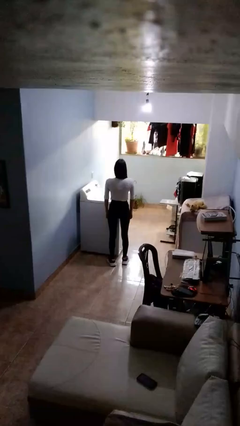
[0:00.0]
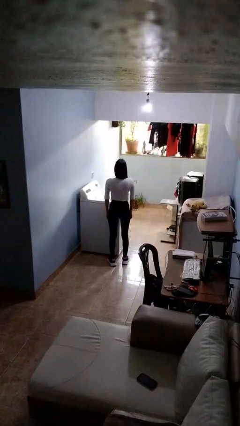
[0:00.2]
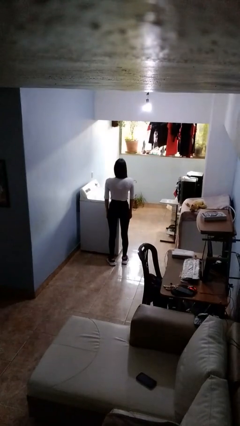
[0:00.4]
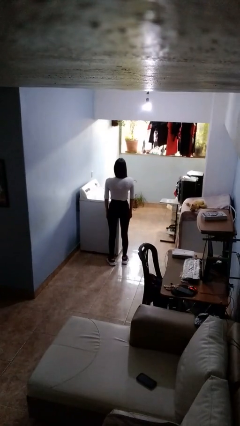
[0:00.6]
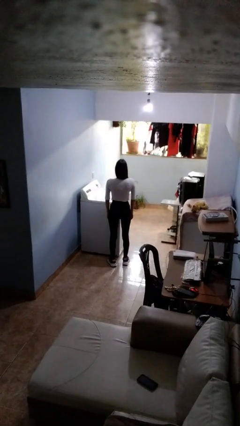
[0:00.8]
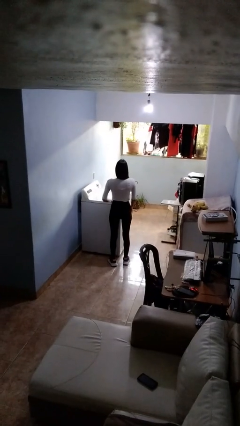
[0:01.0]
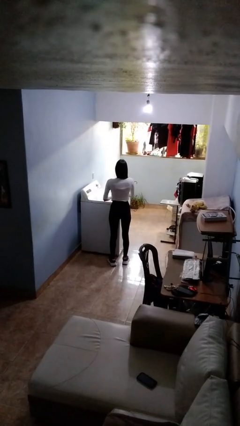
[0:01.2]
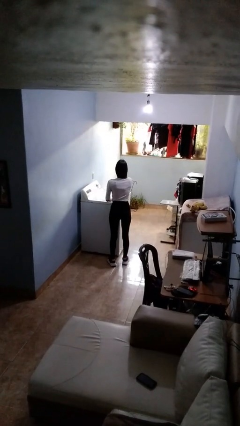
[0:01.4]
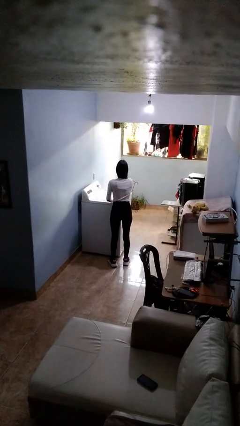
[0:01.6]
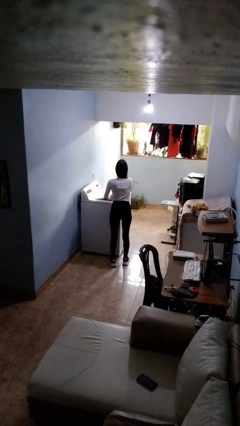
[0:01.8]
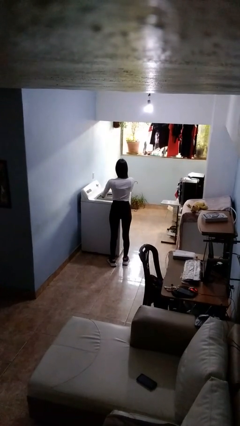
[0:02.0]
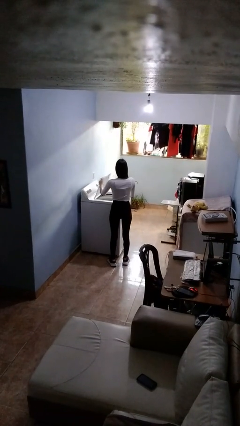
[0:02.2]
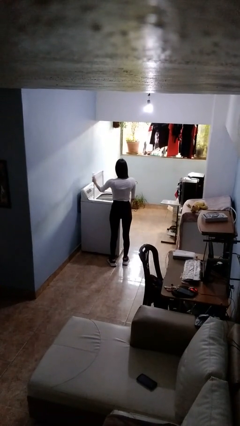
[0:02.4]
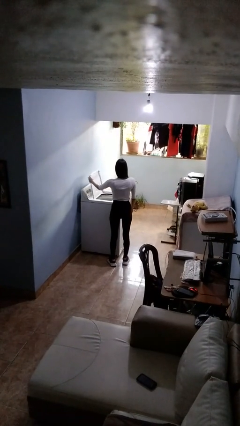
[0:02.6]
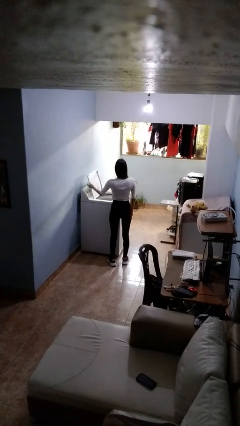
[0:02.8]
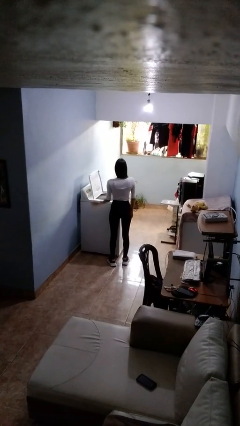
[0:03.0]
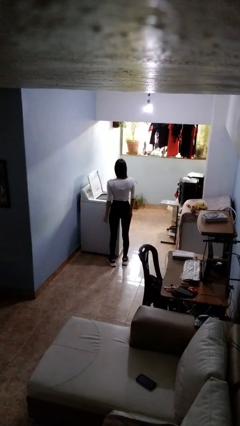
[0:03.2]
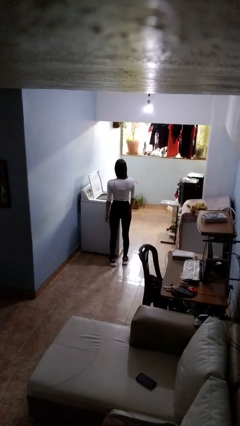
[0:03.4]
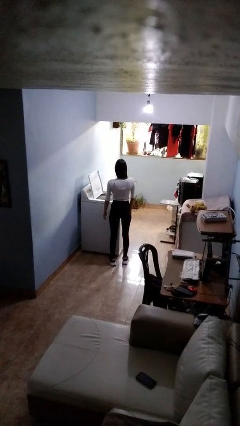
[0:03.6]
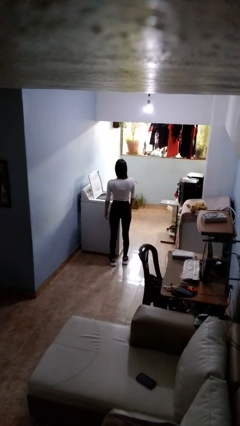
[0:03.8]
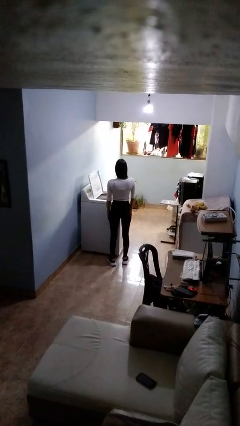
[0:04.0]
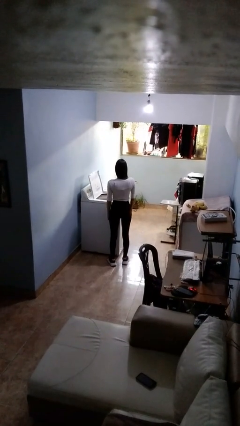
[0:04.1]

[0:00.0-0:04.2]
person opens clothes washer

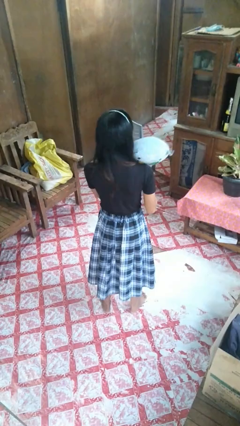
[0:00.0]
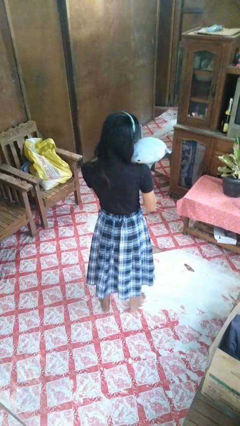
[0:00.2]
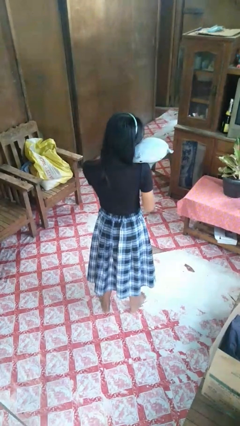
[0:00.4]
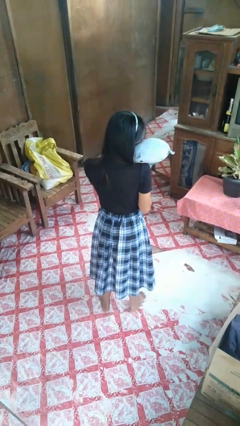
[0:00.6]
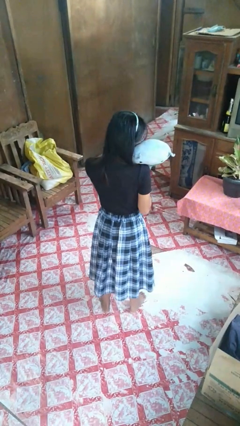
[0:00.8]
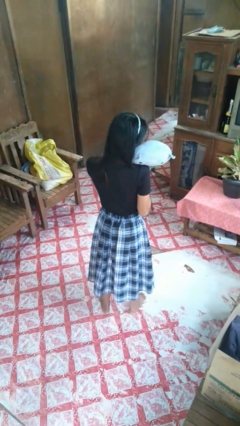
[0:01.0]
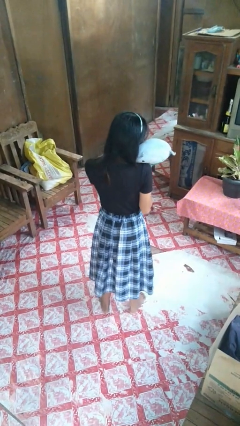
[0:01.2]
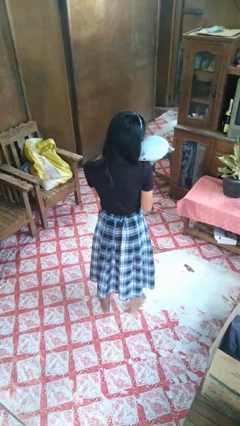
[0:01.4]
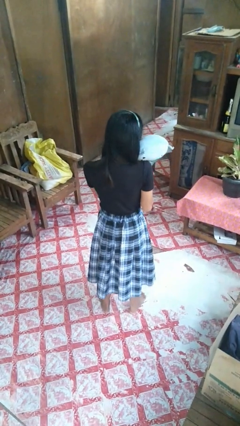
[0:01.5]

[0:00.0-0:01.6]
person hugs stuffed animal

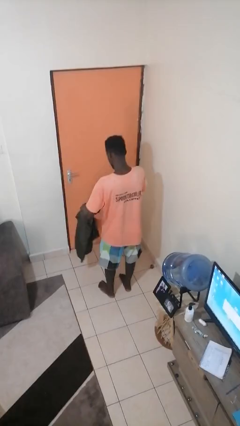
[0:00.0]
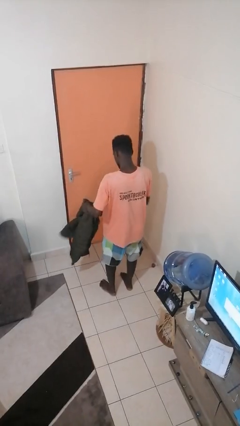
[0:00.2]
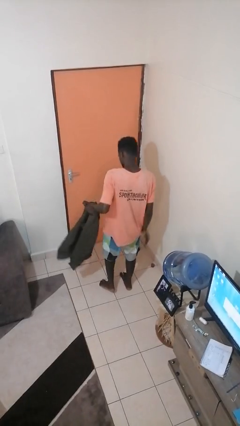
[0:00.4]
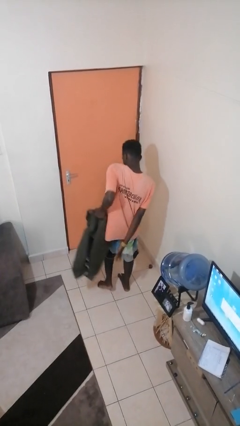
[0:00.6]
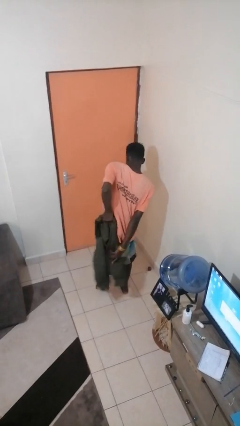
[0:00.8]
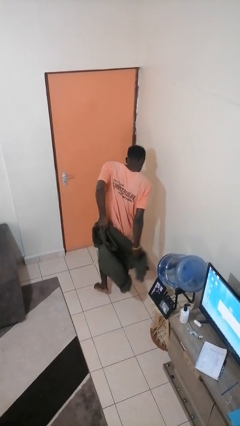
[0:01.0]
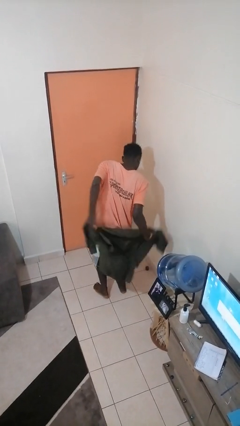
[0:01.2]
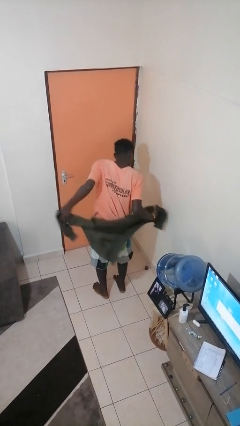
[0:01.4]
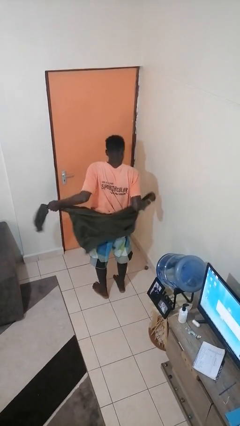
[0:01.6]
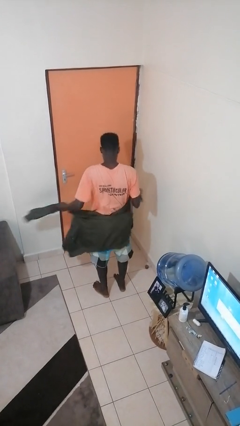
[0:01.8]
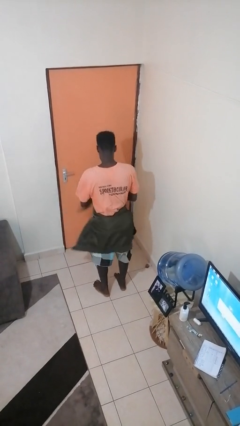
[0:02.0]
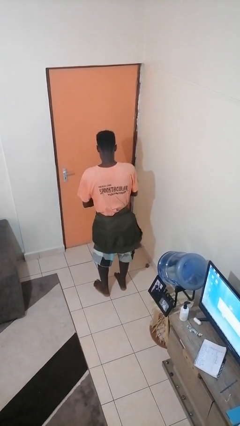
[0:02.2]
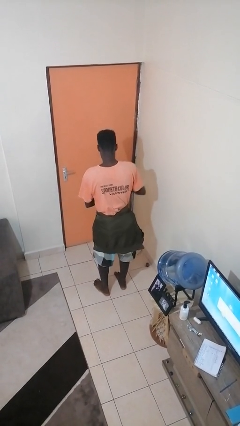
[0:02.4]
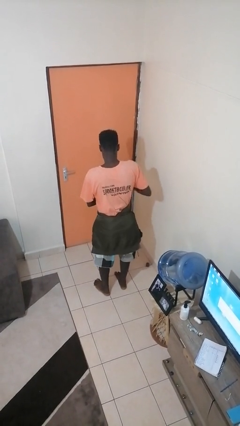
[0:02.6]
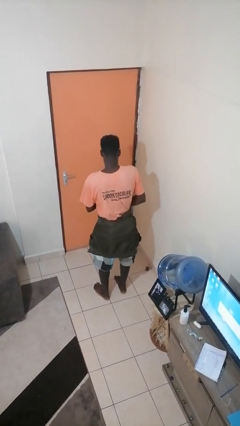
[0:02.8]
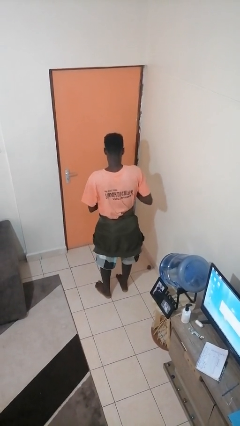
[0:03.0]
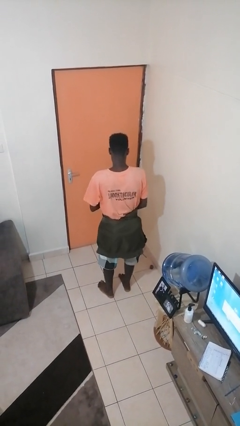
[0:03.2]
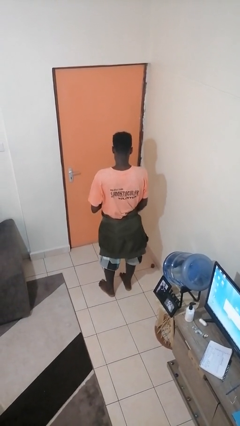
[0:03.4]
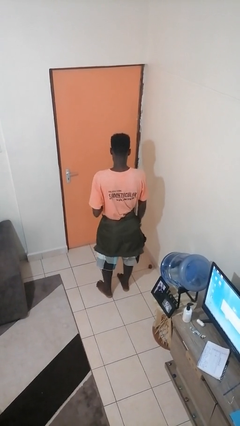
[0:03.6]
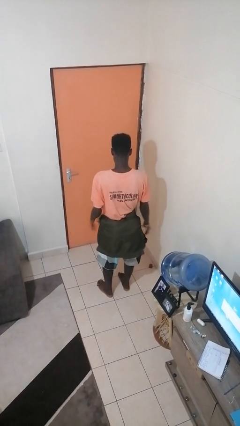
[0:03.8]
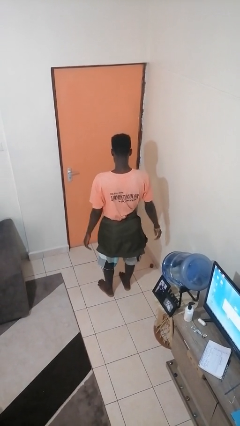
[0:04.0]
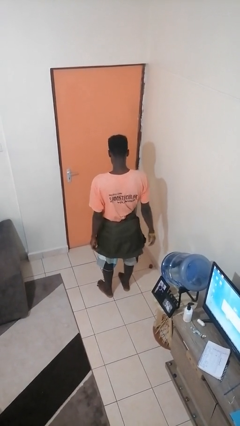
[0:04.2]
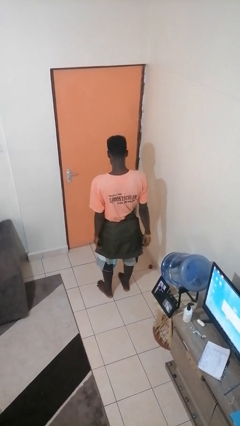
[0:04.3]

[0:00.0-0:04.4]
person ties jacket around waist

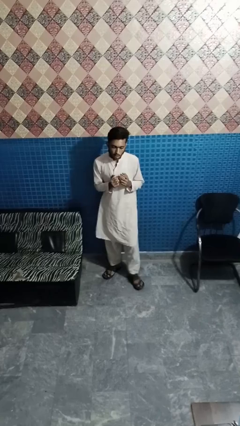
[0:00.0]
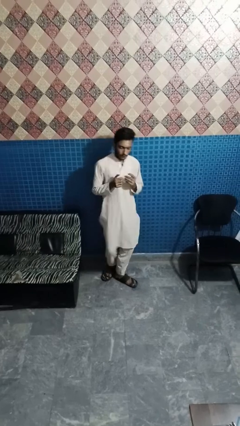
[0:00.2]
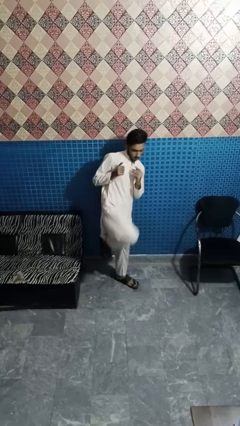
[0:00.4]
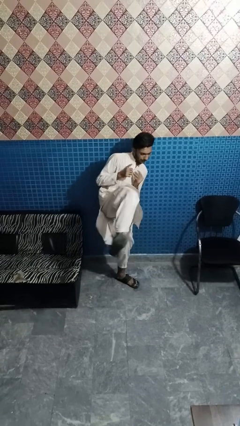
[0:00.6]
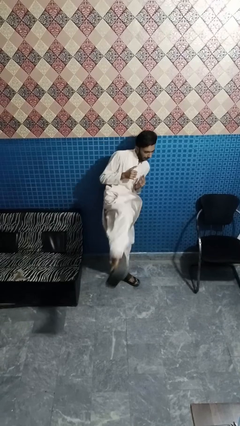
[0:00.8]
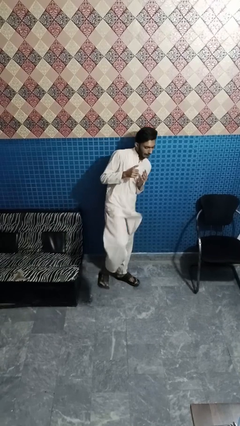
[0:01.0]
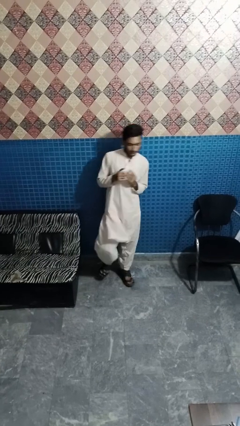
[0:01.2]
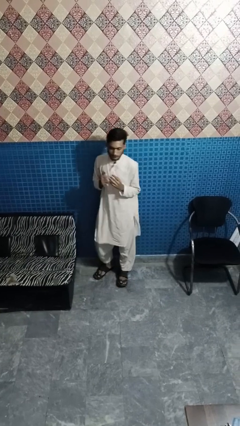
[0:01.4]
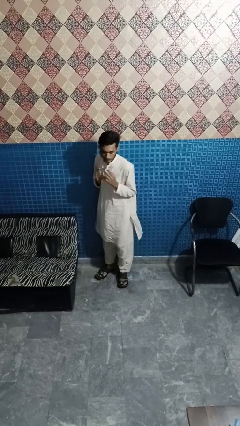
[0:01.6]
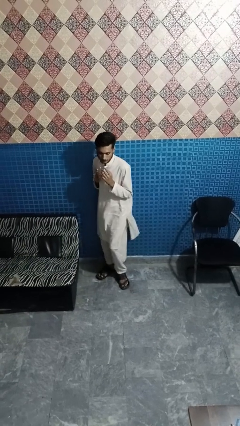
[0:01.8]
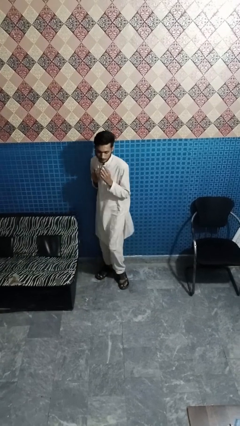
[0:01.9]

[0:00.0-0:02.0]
person karate kicks

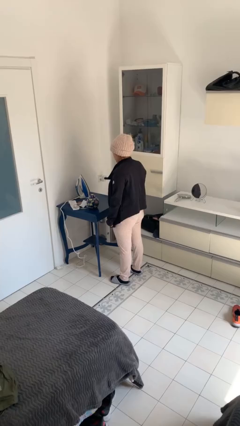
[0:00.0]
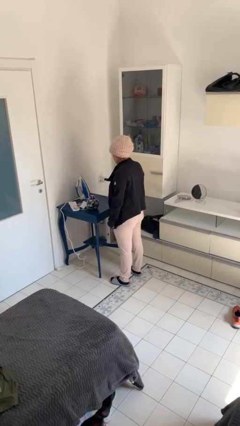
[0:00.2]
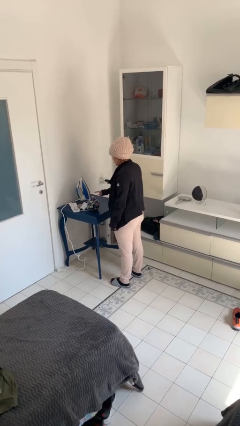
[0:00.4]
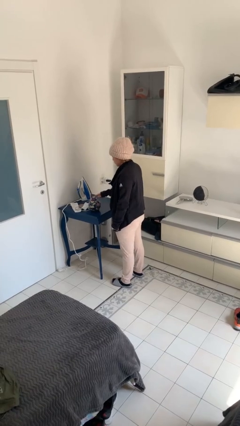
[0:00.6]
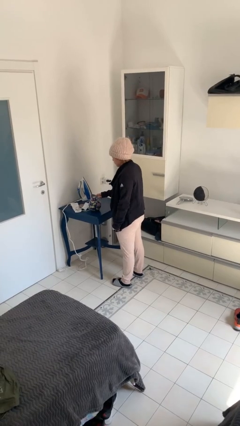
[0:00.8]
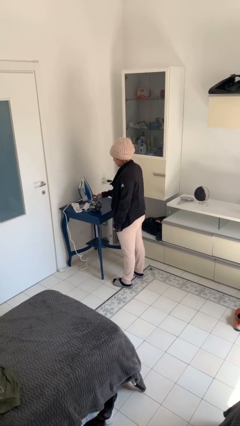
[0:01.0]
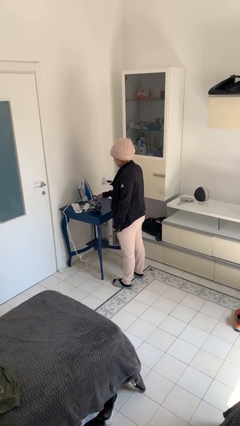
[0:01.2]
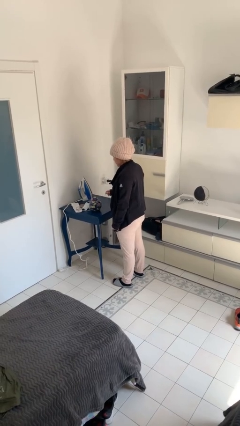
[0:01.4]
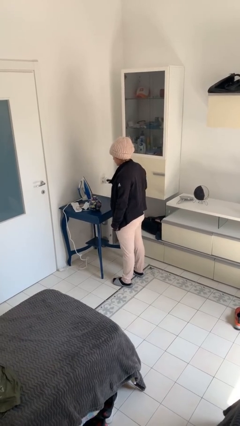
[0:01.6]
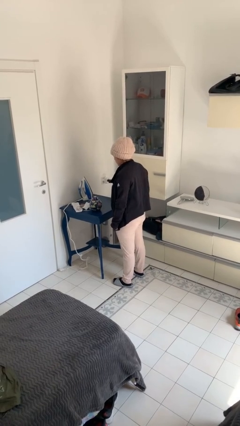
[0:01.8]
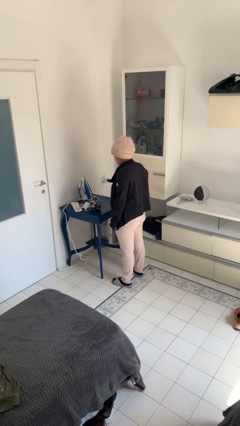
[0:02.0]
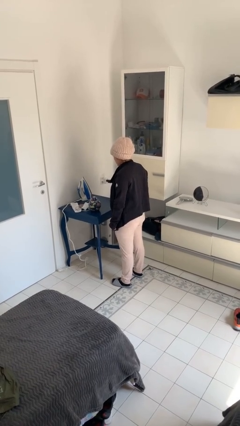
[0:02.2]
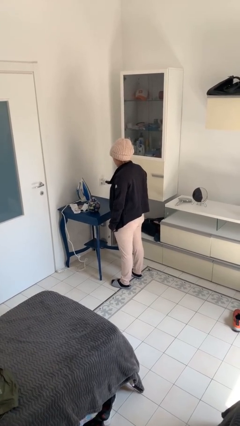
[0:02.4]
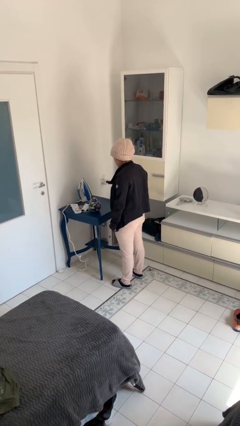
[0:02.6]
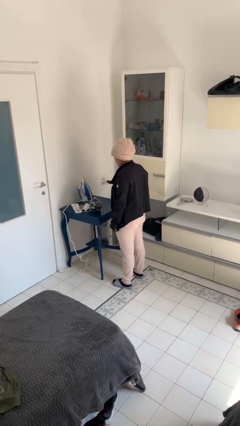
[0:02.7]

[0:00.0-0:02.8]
person taps object with finger

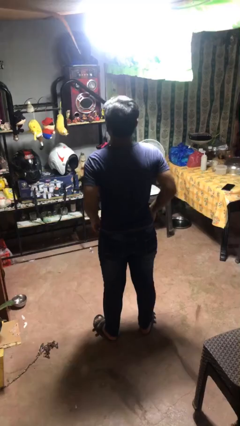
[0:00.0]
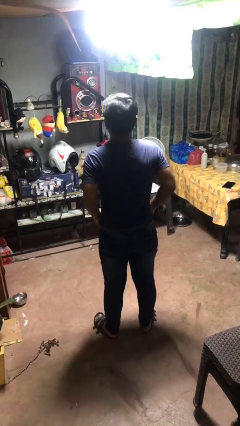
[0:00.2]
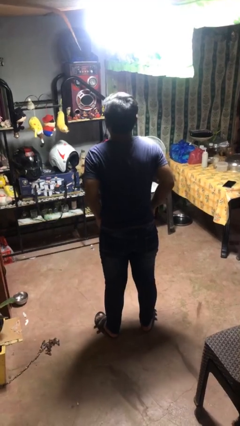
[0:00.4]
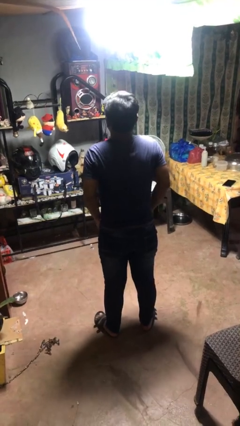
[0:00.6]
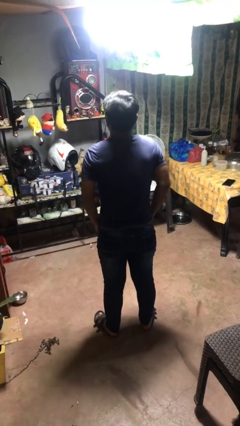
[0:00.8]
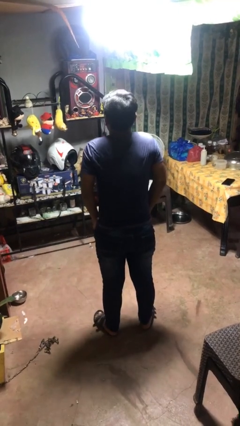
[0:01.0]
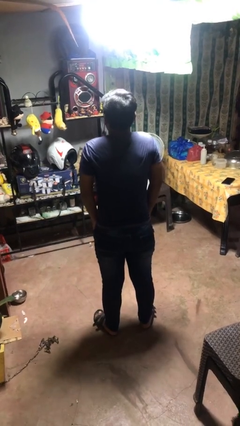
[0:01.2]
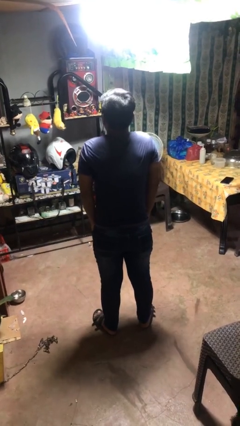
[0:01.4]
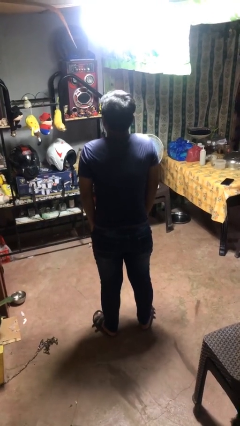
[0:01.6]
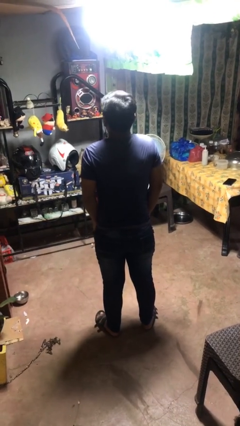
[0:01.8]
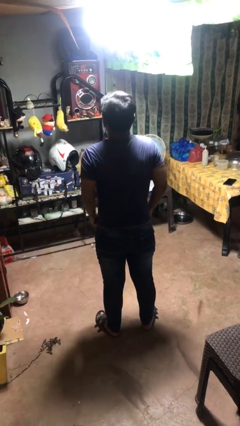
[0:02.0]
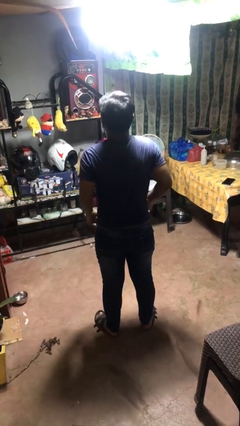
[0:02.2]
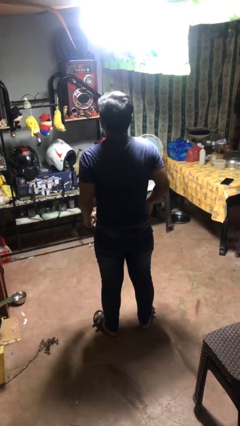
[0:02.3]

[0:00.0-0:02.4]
person puts hands in back pockets

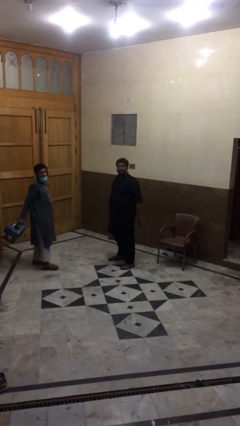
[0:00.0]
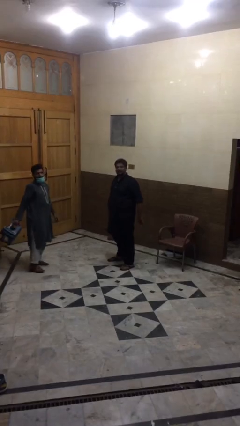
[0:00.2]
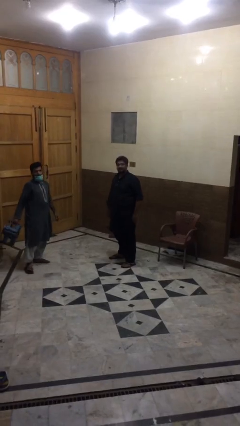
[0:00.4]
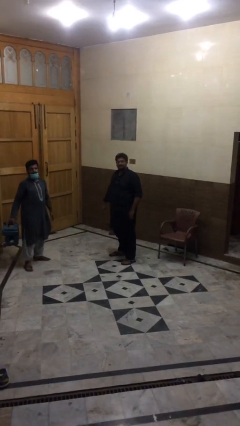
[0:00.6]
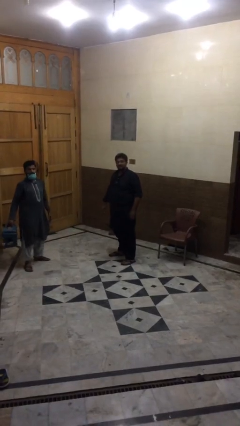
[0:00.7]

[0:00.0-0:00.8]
person transfers object to person
